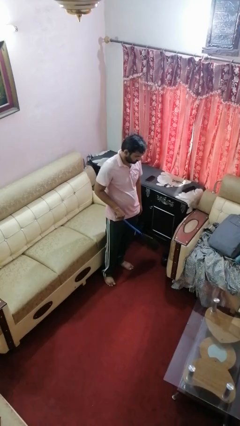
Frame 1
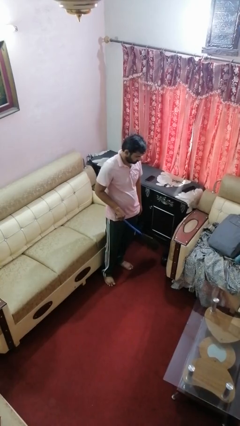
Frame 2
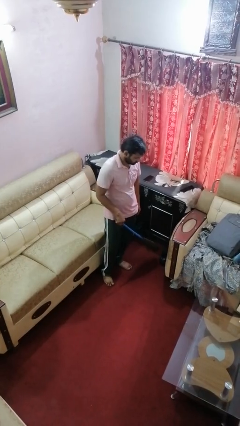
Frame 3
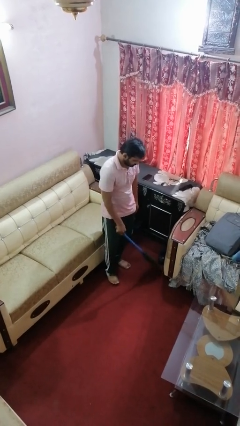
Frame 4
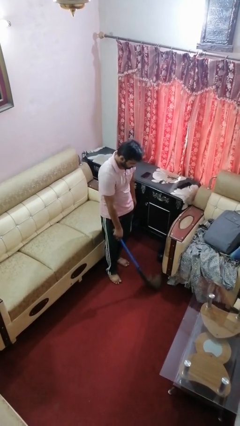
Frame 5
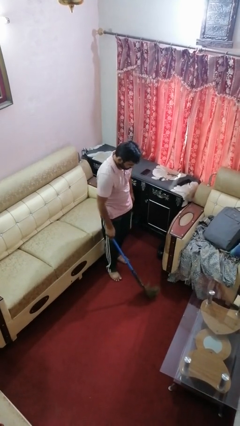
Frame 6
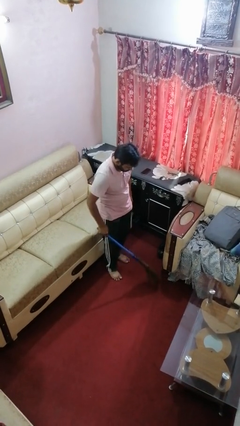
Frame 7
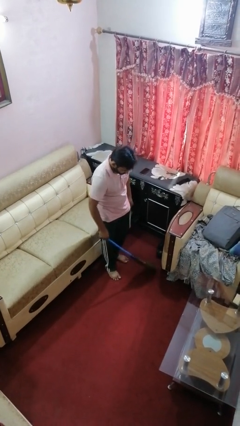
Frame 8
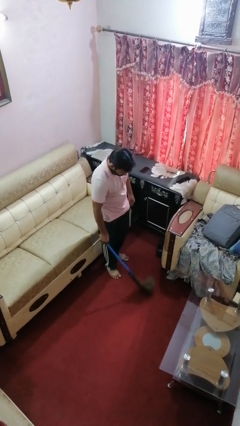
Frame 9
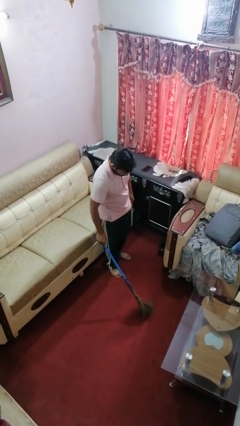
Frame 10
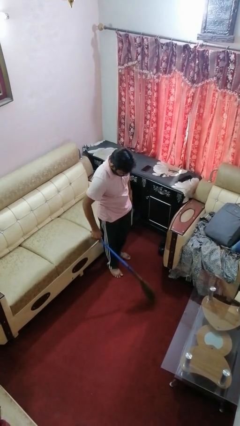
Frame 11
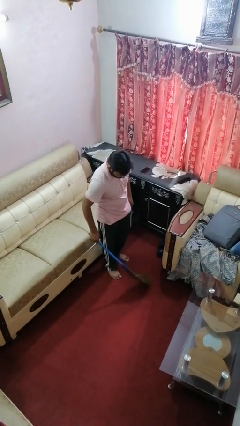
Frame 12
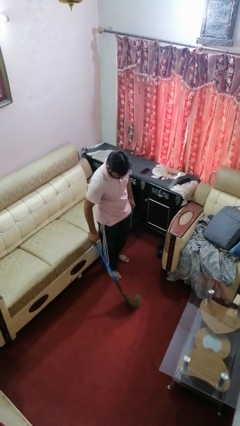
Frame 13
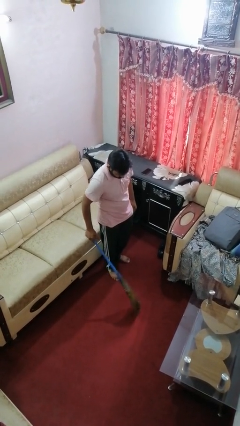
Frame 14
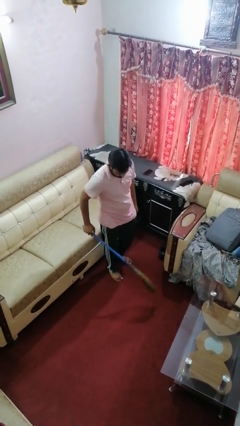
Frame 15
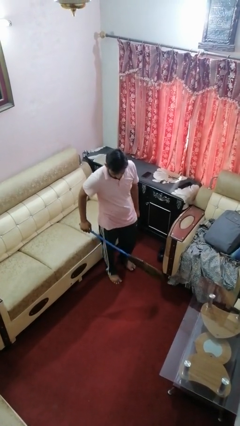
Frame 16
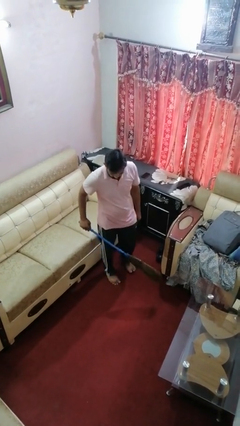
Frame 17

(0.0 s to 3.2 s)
person sweeps floor

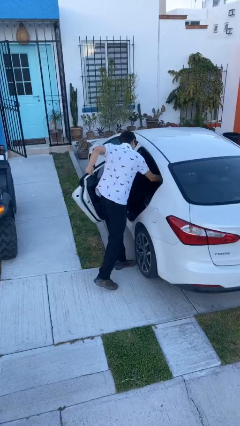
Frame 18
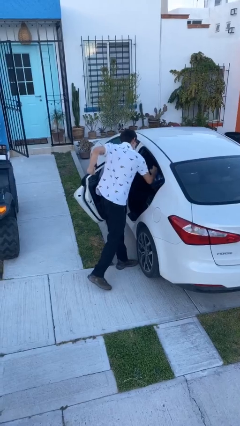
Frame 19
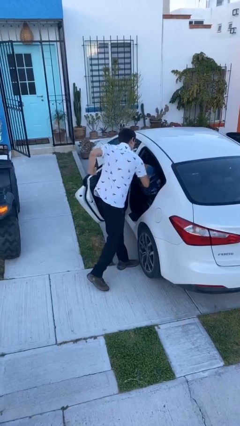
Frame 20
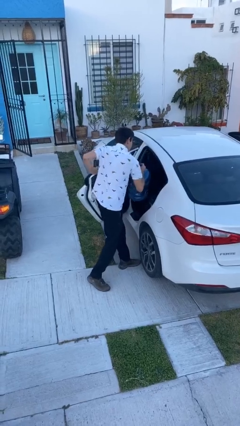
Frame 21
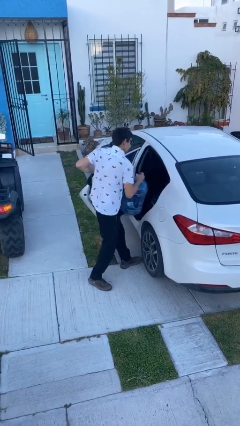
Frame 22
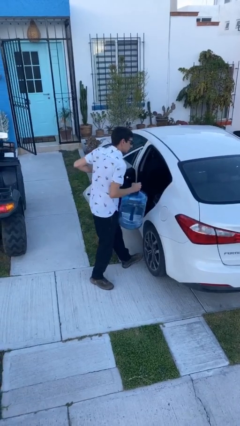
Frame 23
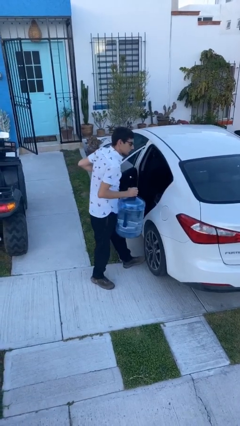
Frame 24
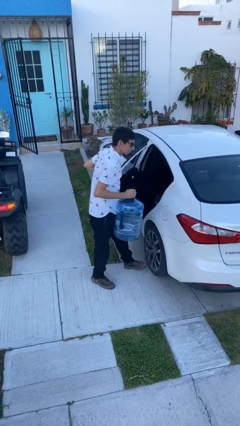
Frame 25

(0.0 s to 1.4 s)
person unloads car

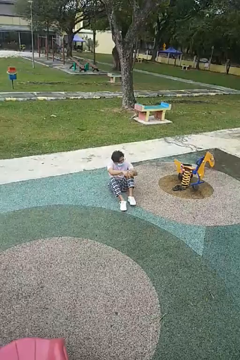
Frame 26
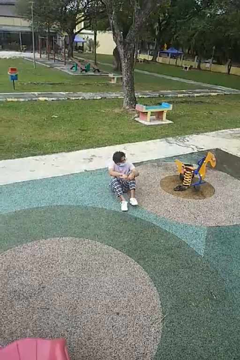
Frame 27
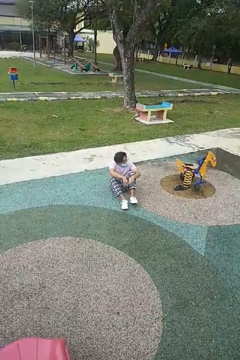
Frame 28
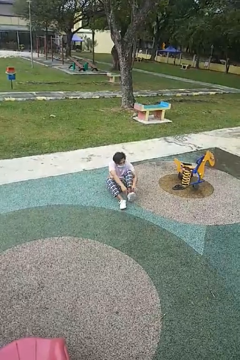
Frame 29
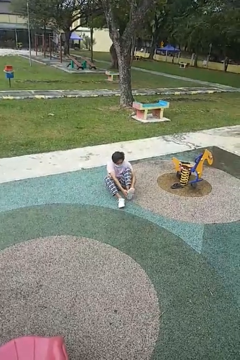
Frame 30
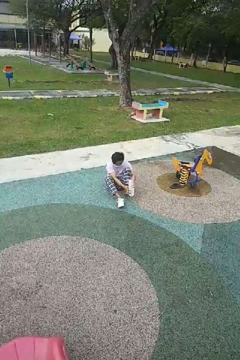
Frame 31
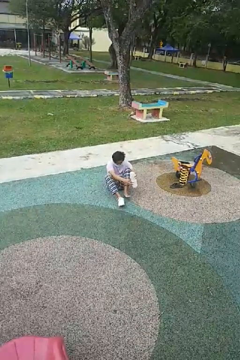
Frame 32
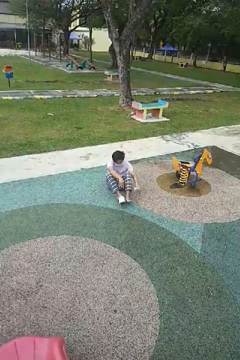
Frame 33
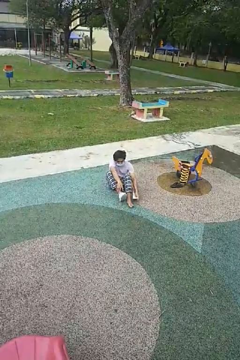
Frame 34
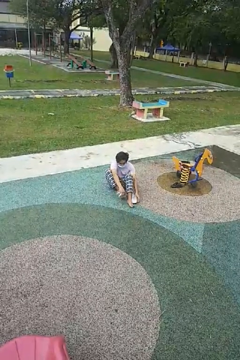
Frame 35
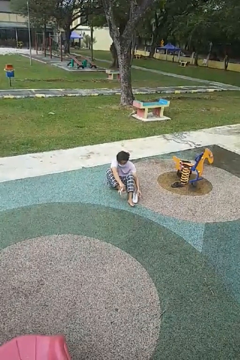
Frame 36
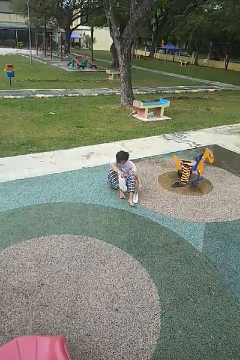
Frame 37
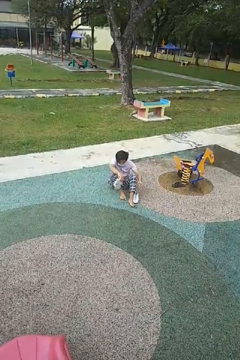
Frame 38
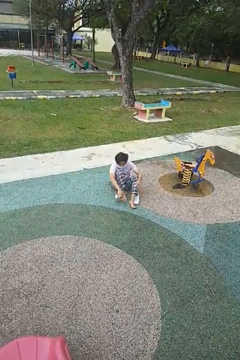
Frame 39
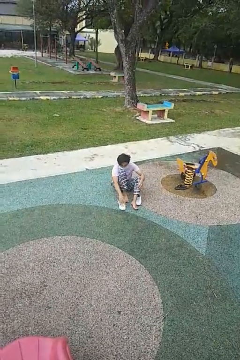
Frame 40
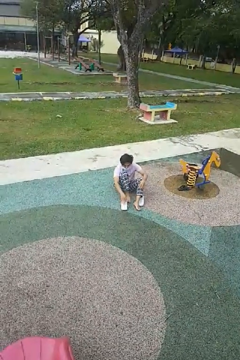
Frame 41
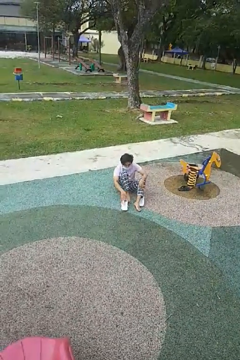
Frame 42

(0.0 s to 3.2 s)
person takes off shoes

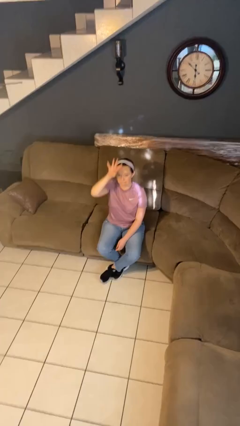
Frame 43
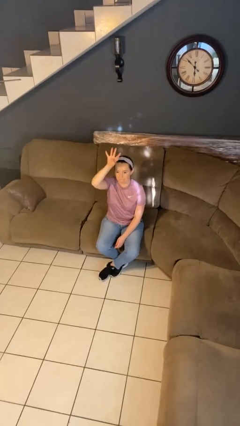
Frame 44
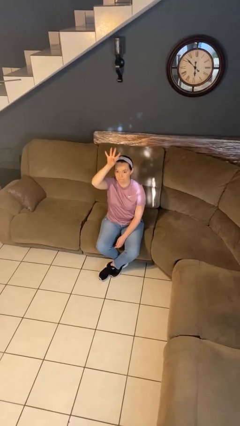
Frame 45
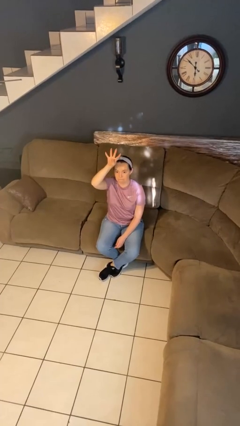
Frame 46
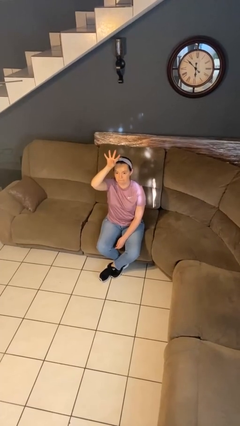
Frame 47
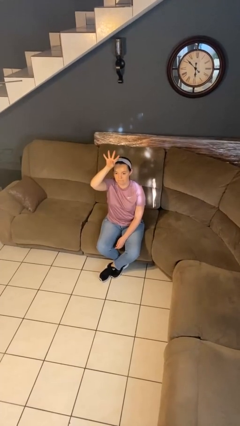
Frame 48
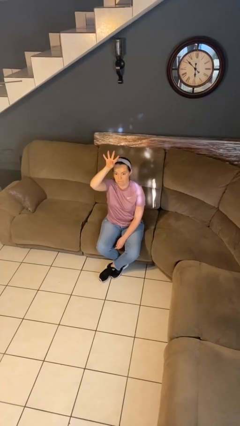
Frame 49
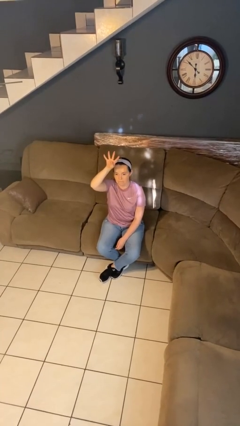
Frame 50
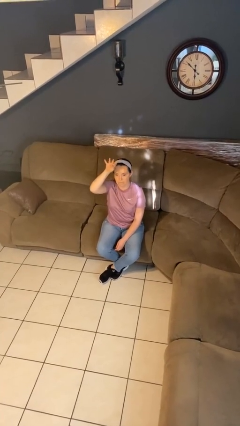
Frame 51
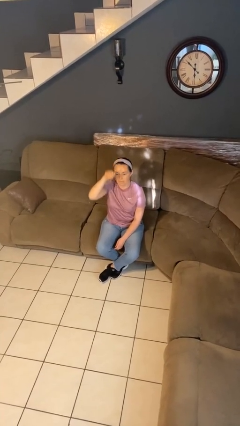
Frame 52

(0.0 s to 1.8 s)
person gestures number four

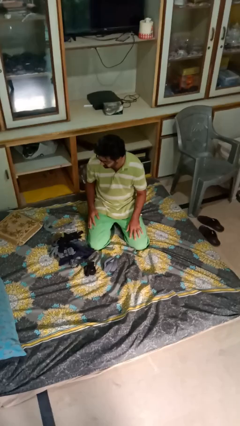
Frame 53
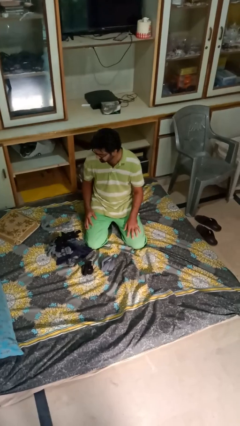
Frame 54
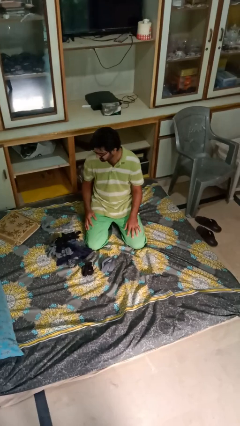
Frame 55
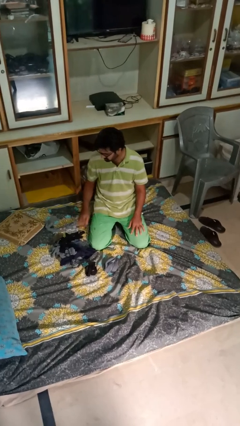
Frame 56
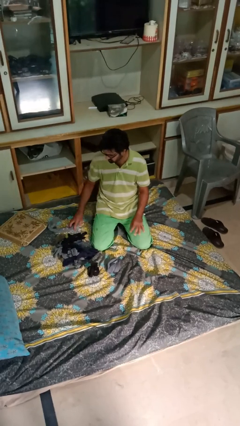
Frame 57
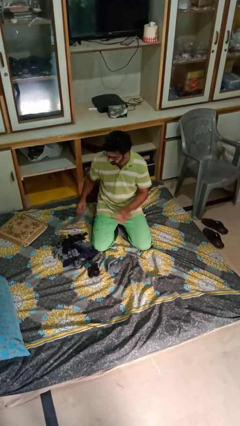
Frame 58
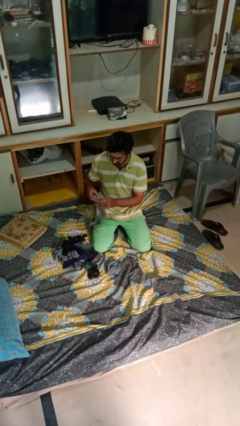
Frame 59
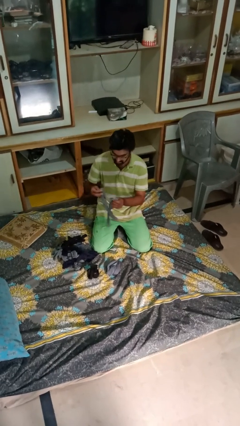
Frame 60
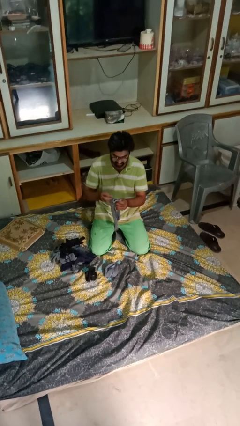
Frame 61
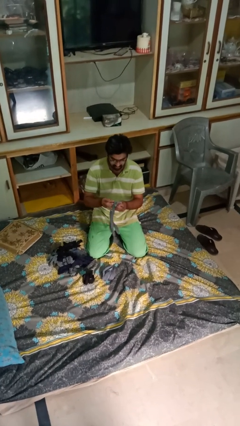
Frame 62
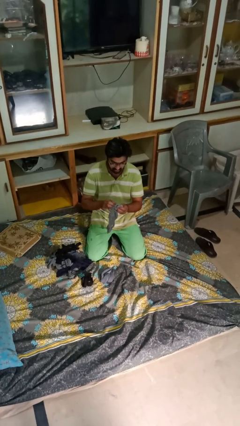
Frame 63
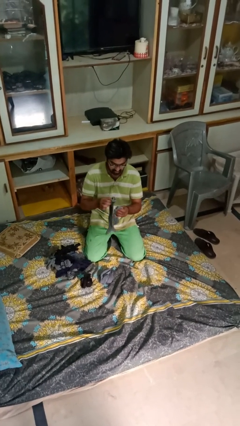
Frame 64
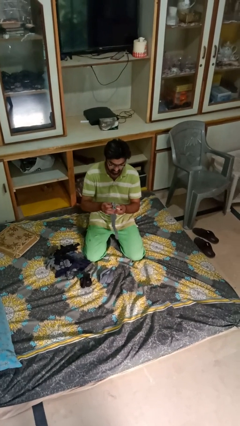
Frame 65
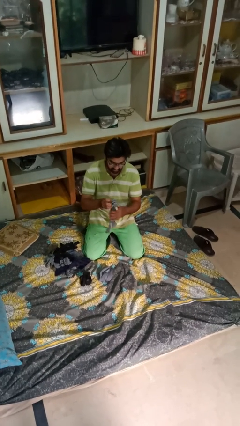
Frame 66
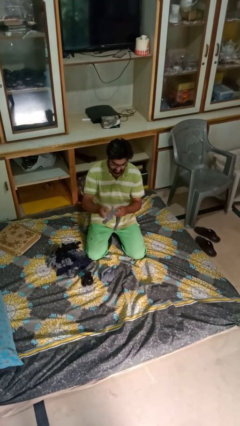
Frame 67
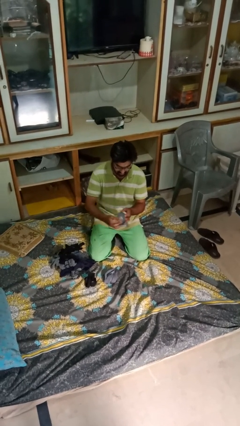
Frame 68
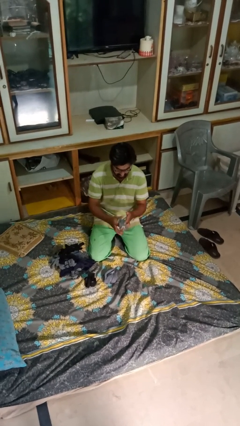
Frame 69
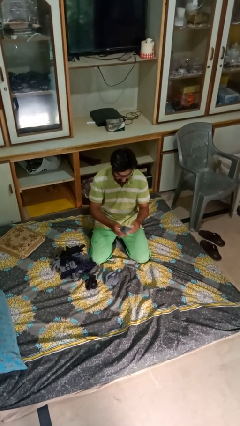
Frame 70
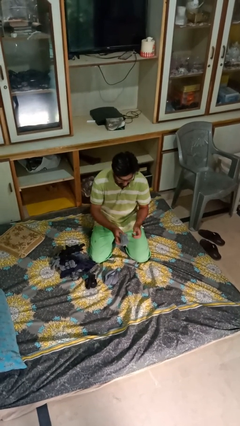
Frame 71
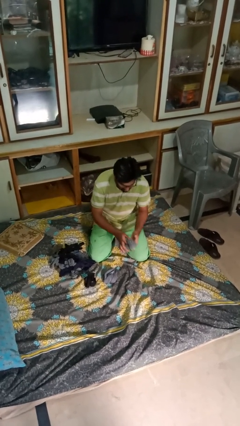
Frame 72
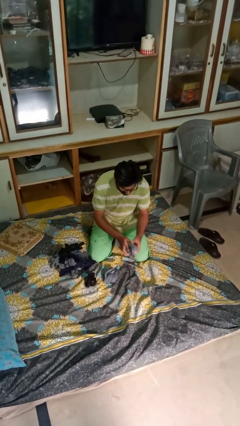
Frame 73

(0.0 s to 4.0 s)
person folds socks

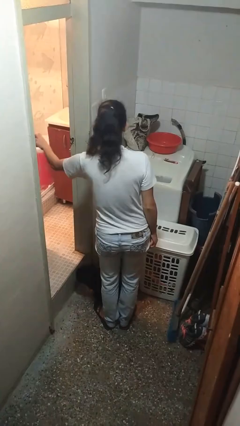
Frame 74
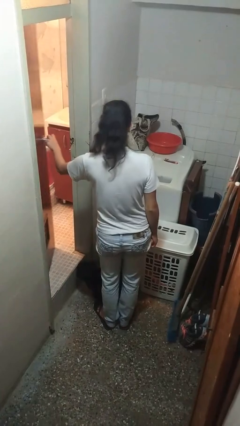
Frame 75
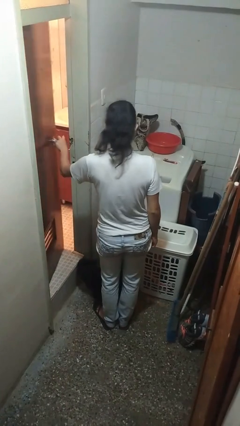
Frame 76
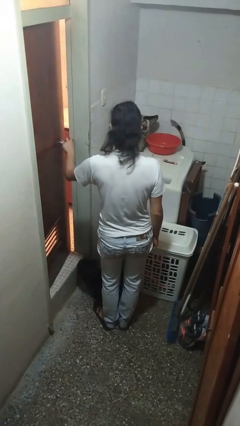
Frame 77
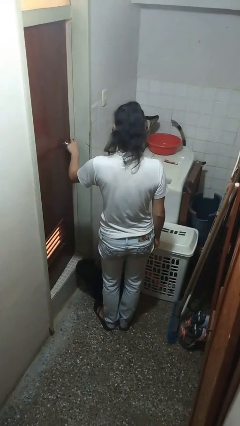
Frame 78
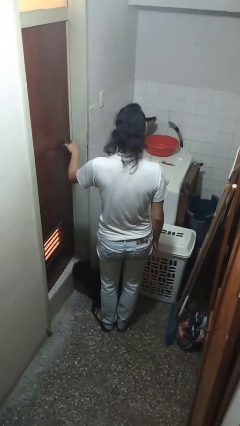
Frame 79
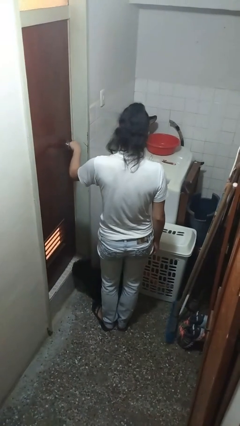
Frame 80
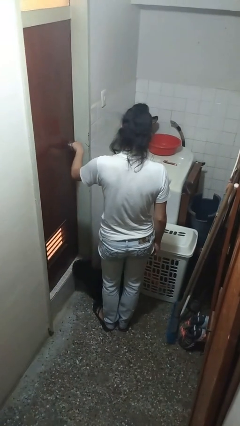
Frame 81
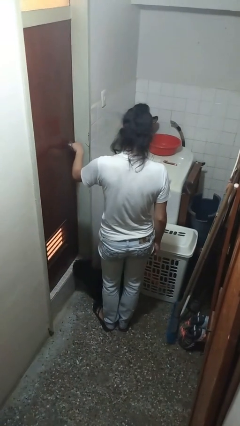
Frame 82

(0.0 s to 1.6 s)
person closes facility door

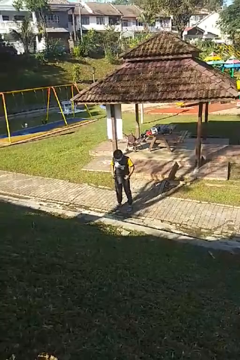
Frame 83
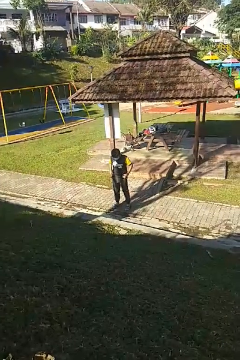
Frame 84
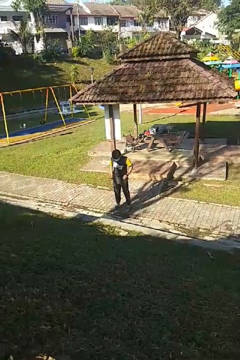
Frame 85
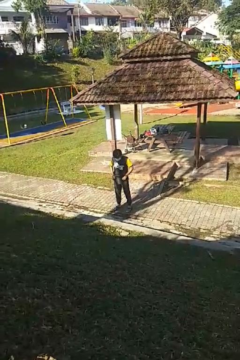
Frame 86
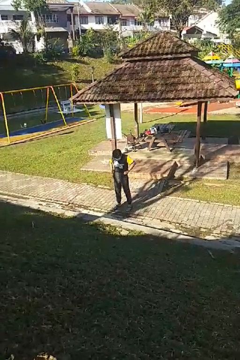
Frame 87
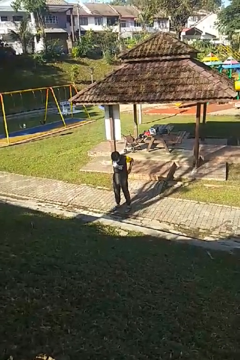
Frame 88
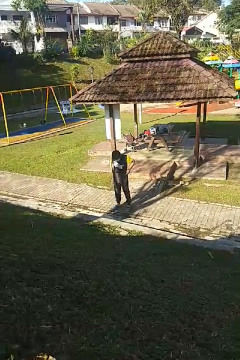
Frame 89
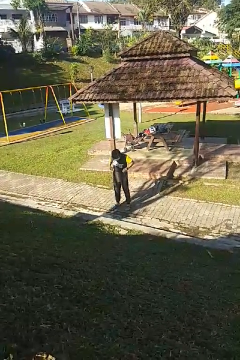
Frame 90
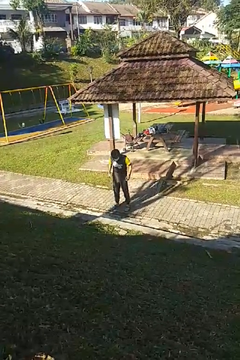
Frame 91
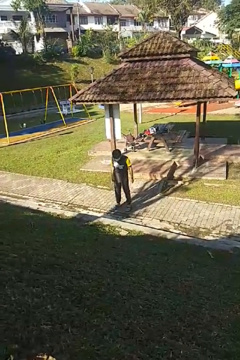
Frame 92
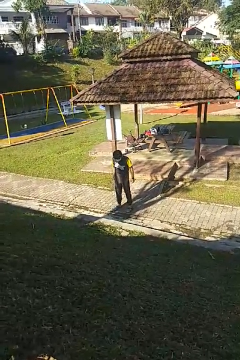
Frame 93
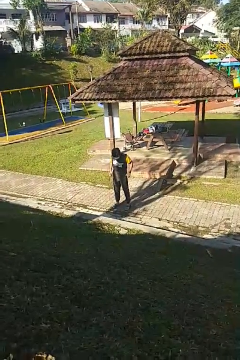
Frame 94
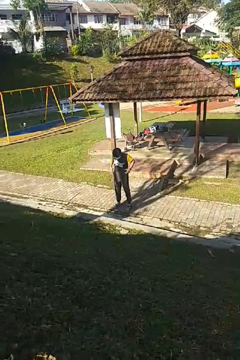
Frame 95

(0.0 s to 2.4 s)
person hikes up pants

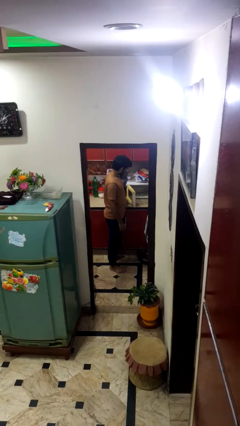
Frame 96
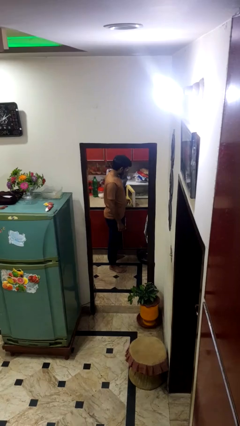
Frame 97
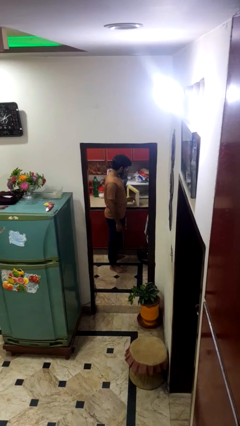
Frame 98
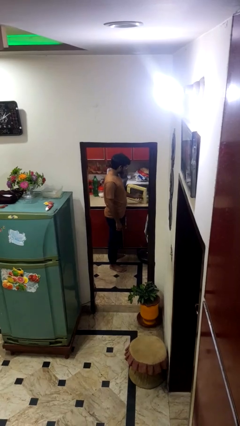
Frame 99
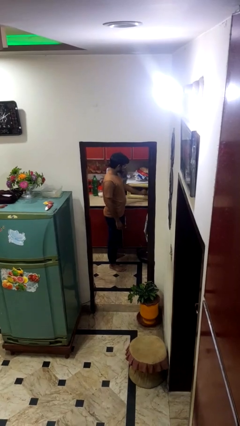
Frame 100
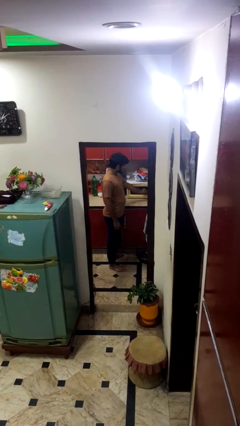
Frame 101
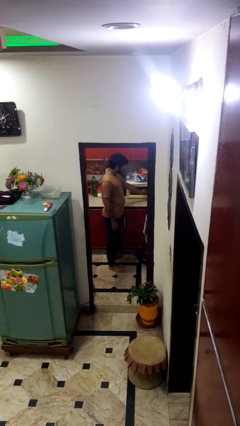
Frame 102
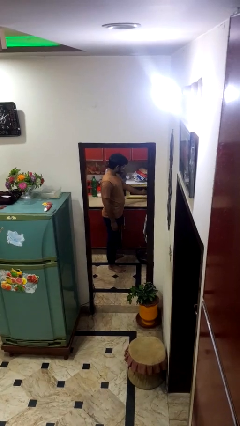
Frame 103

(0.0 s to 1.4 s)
person closes microwave
